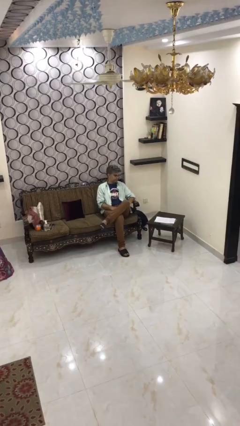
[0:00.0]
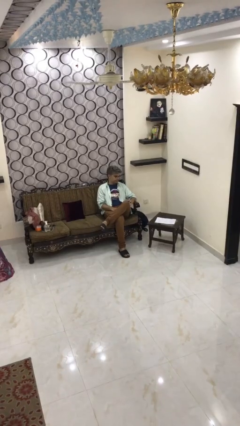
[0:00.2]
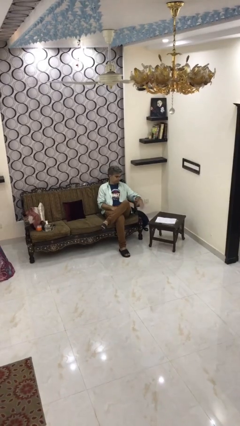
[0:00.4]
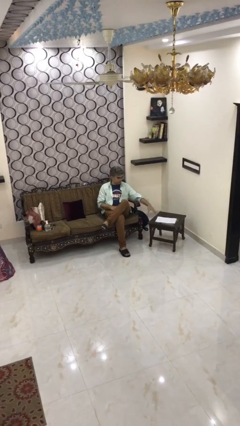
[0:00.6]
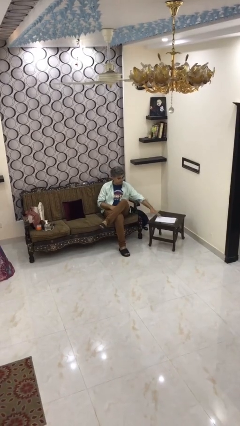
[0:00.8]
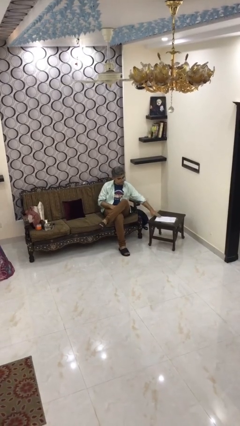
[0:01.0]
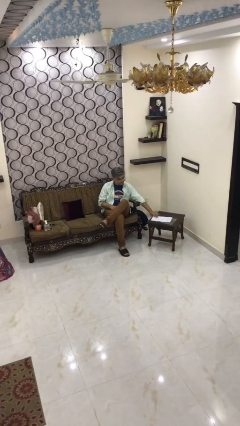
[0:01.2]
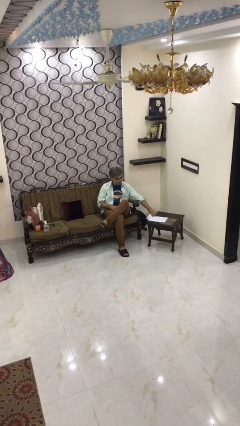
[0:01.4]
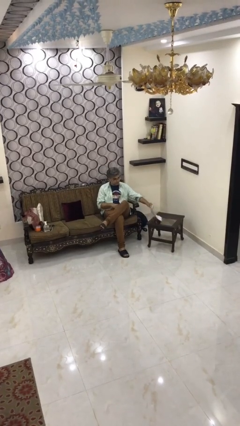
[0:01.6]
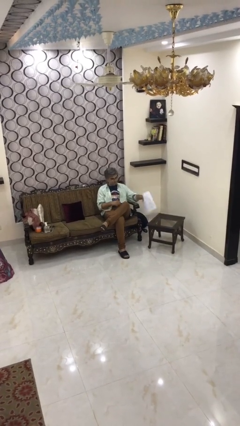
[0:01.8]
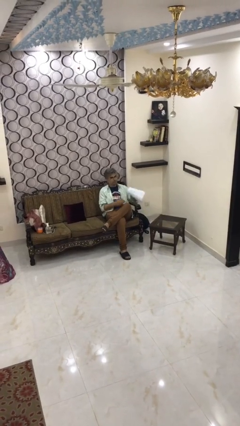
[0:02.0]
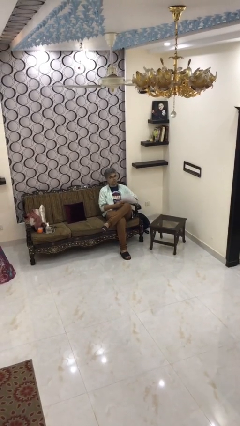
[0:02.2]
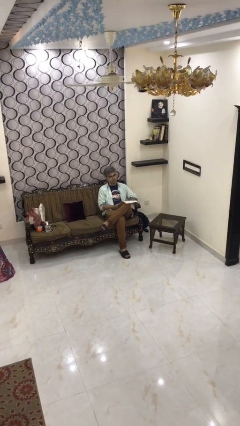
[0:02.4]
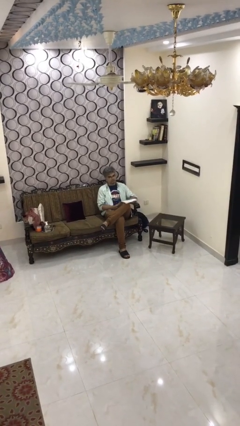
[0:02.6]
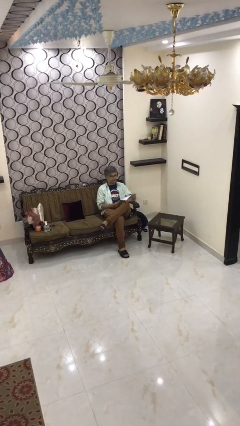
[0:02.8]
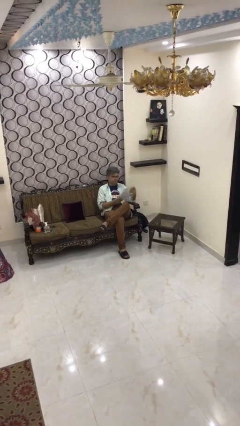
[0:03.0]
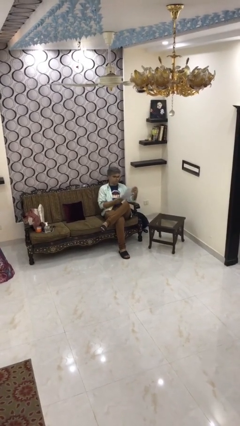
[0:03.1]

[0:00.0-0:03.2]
person picks up object from table

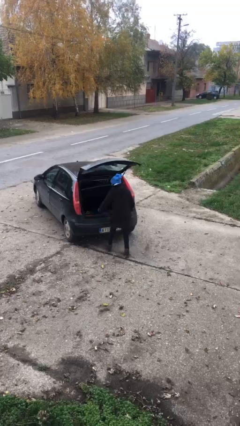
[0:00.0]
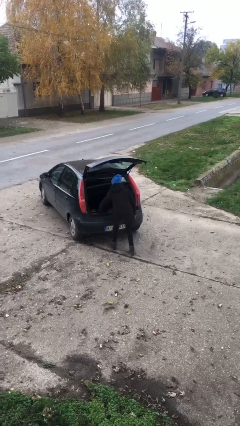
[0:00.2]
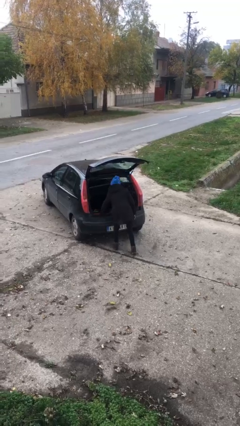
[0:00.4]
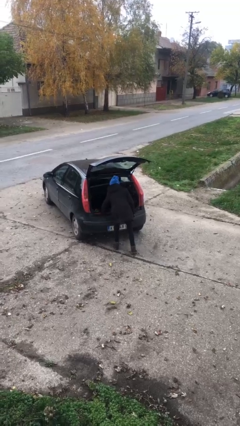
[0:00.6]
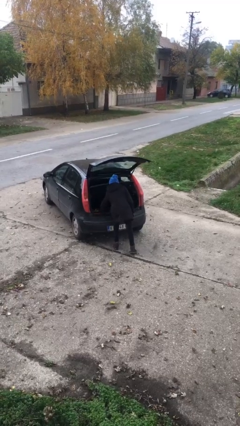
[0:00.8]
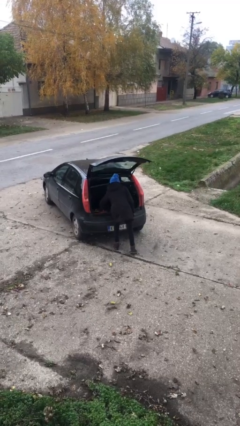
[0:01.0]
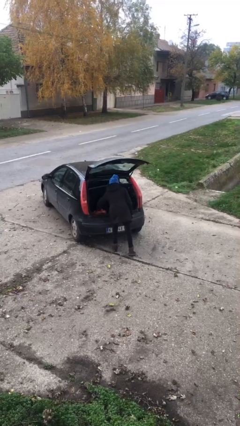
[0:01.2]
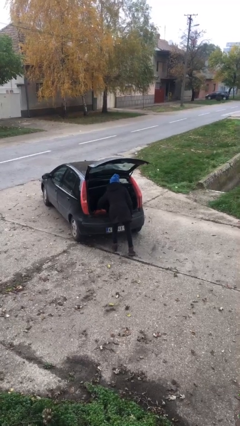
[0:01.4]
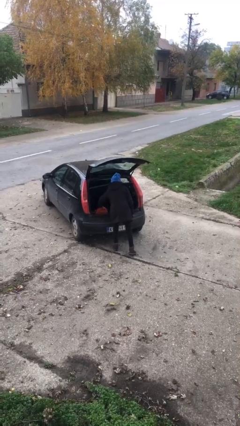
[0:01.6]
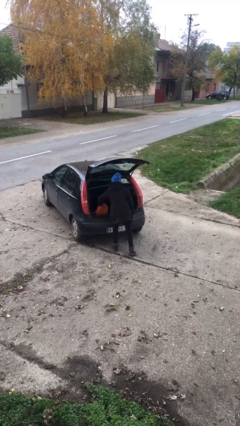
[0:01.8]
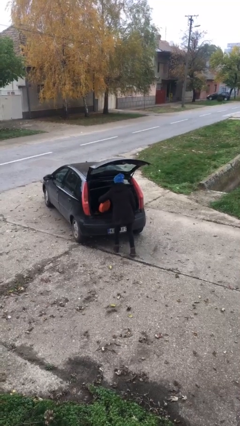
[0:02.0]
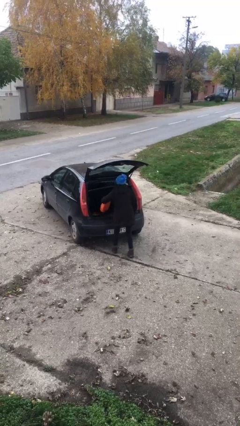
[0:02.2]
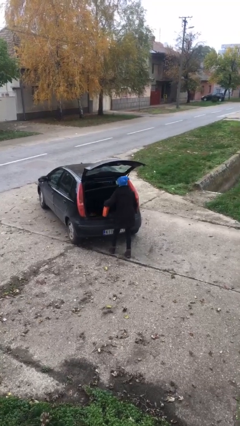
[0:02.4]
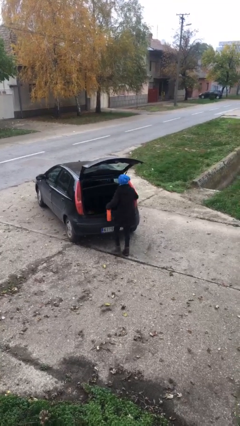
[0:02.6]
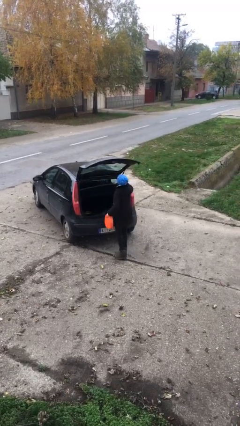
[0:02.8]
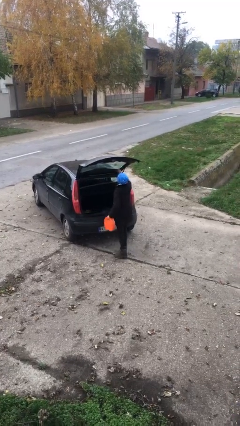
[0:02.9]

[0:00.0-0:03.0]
person unloads car

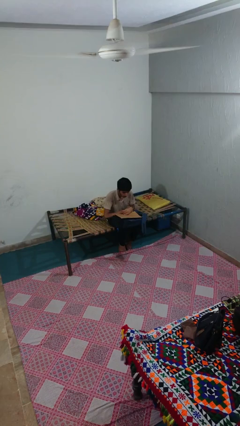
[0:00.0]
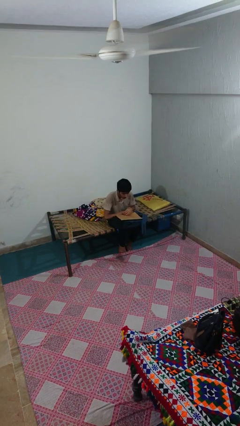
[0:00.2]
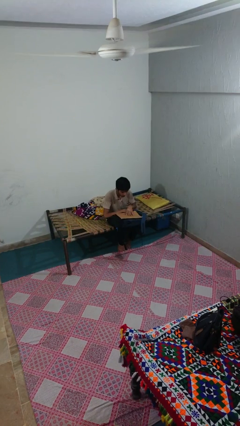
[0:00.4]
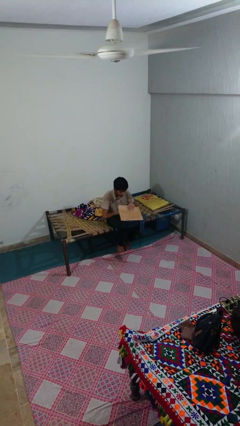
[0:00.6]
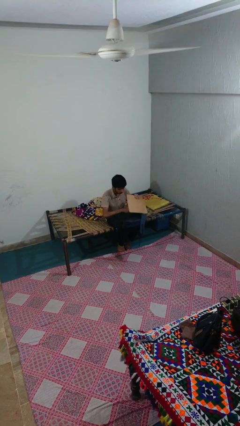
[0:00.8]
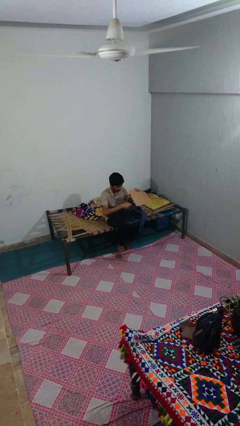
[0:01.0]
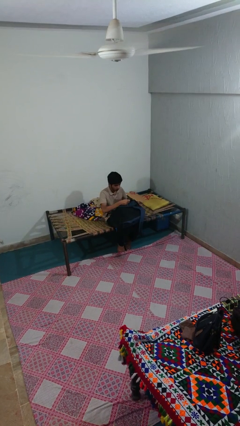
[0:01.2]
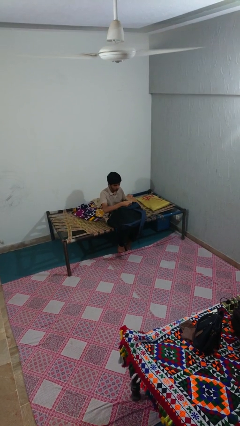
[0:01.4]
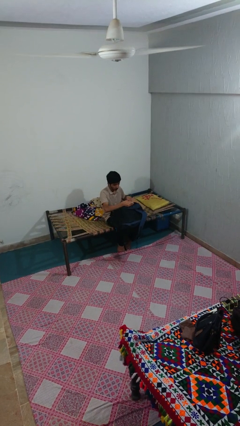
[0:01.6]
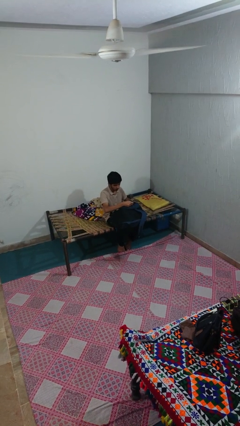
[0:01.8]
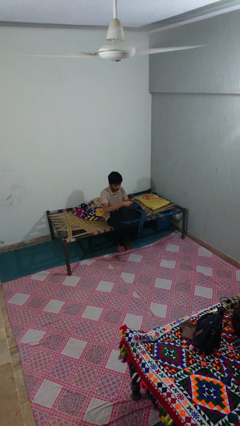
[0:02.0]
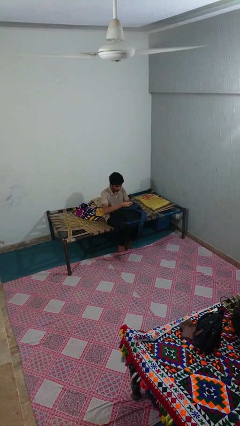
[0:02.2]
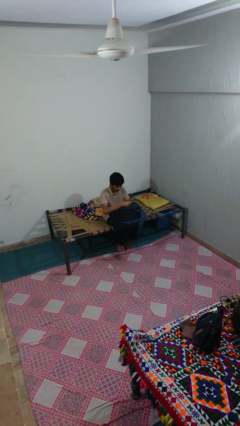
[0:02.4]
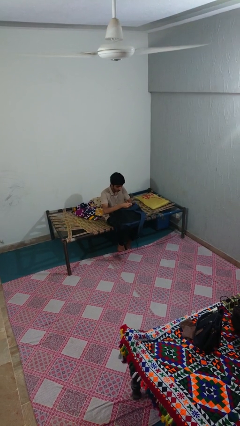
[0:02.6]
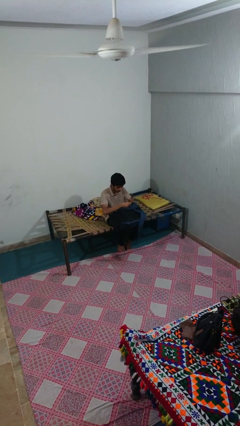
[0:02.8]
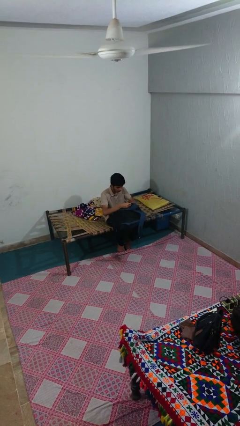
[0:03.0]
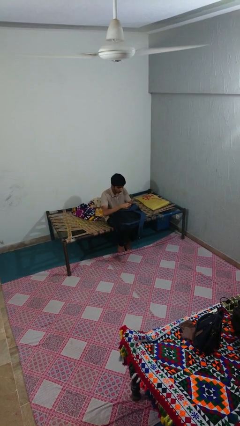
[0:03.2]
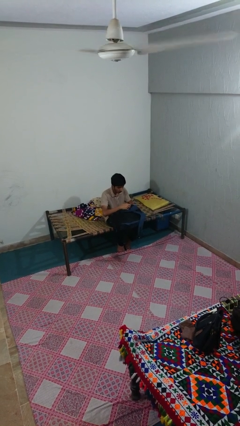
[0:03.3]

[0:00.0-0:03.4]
person puts object into backpack

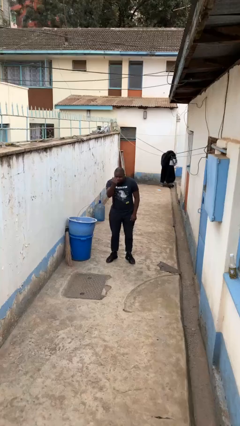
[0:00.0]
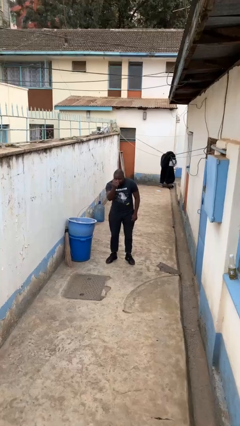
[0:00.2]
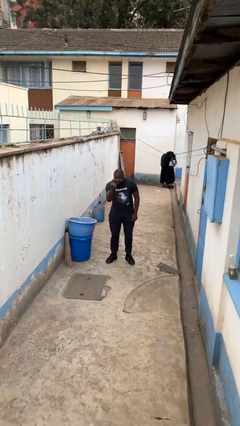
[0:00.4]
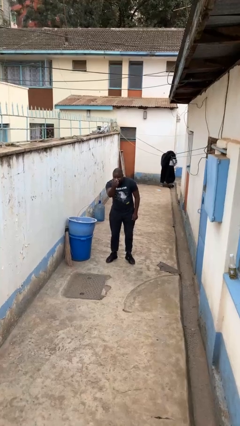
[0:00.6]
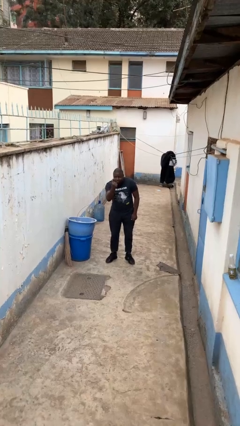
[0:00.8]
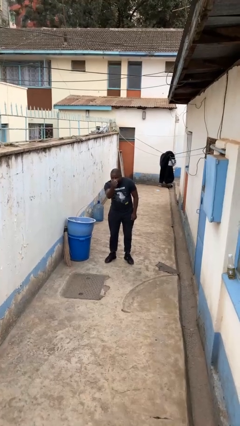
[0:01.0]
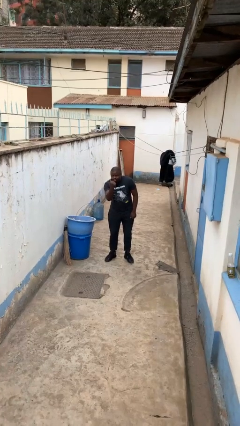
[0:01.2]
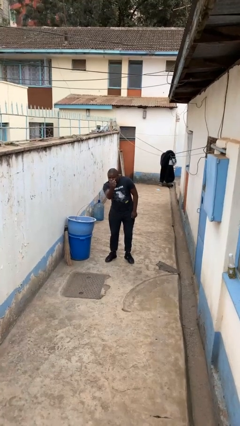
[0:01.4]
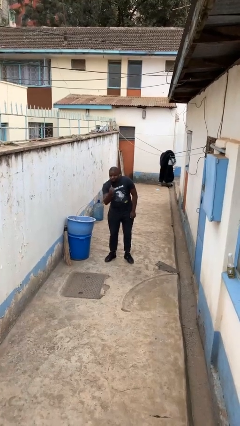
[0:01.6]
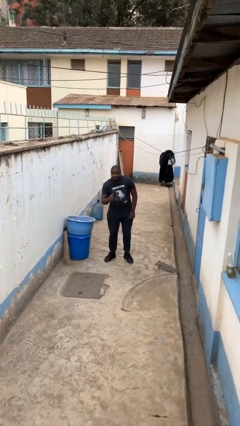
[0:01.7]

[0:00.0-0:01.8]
person gestures come here

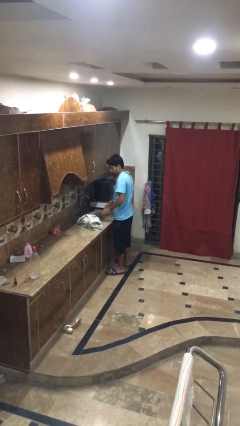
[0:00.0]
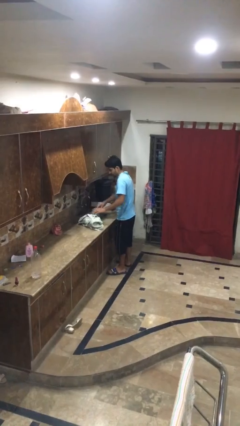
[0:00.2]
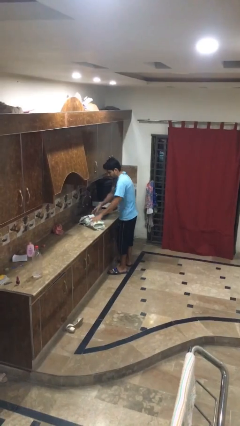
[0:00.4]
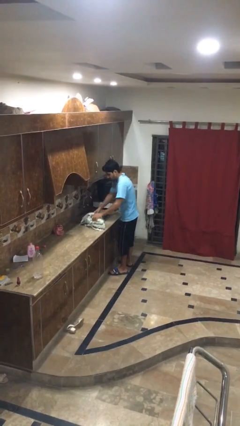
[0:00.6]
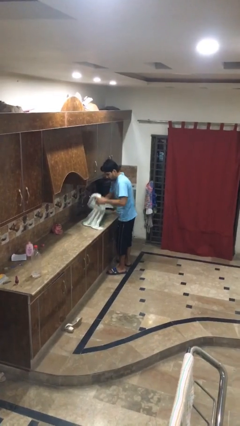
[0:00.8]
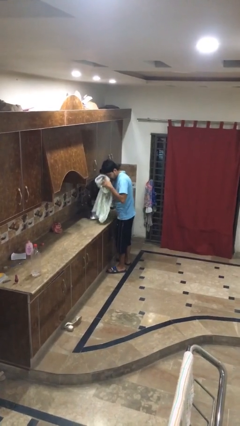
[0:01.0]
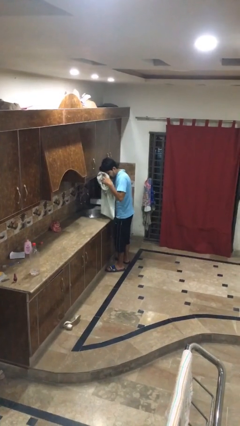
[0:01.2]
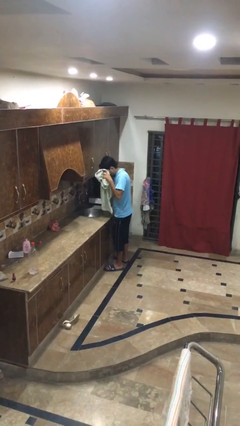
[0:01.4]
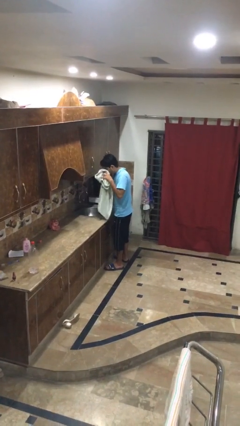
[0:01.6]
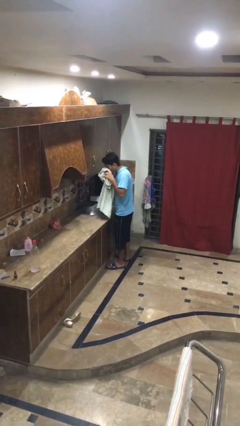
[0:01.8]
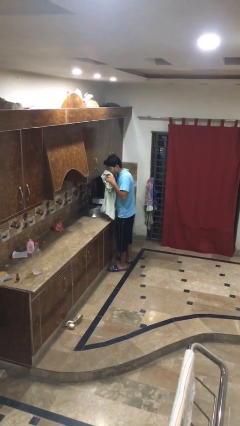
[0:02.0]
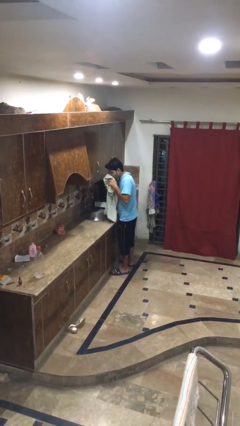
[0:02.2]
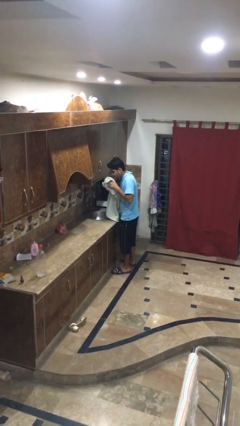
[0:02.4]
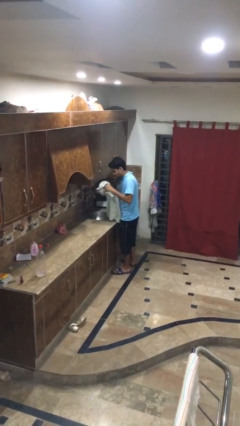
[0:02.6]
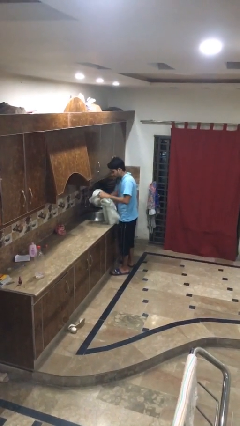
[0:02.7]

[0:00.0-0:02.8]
person dries face with towel

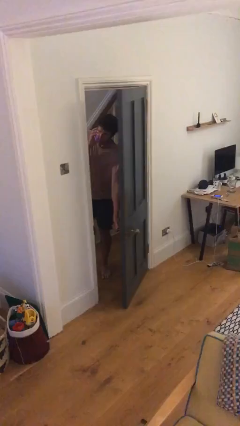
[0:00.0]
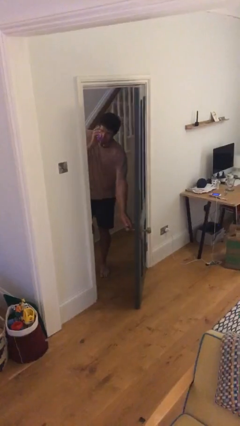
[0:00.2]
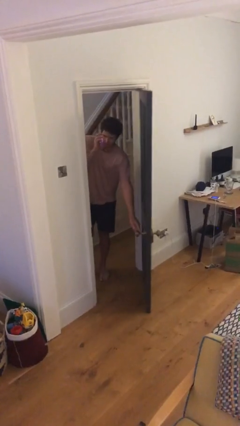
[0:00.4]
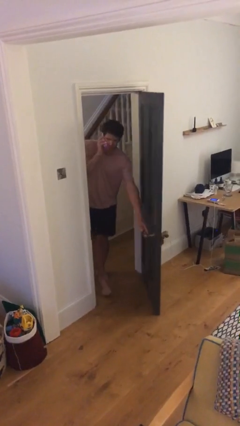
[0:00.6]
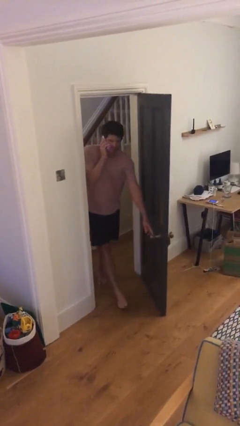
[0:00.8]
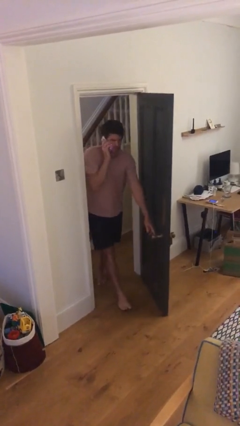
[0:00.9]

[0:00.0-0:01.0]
person opens facility door

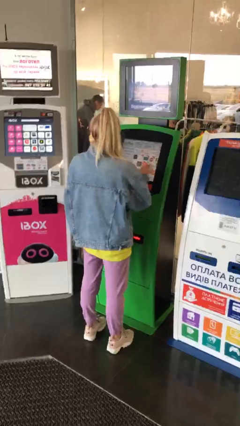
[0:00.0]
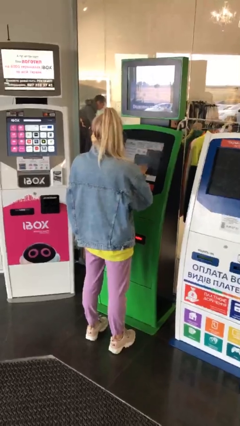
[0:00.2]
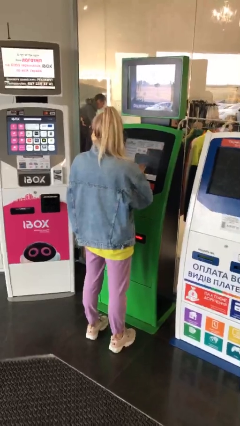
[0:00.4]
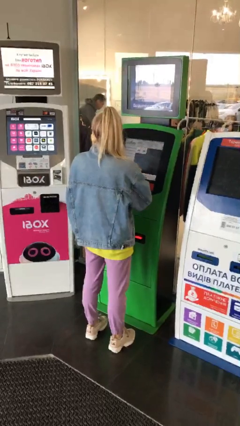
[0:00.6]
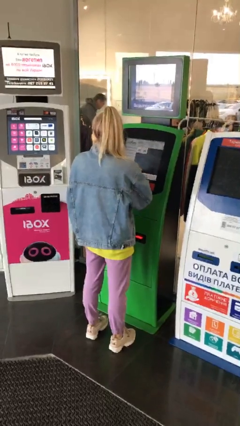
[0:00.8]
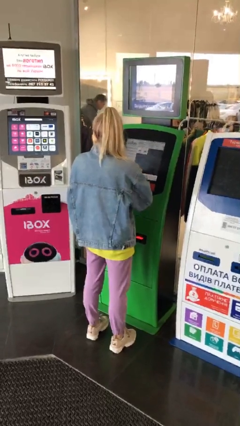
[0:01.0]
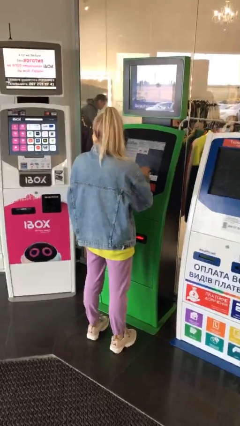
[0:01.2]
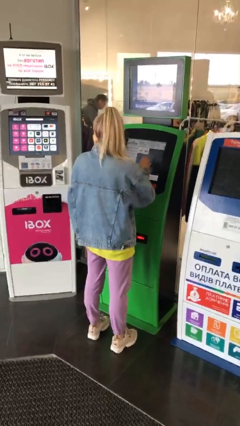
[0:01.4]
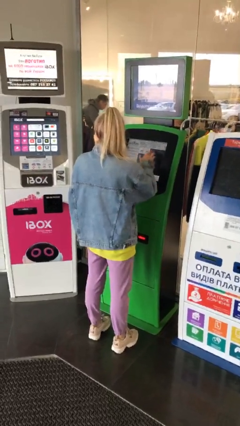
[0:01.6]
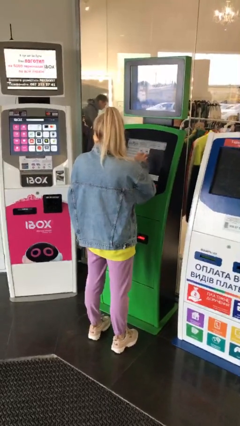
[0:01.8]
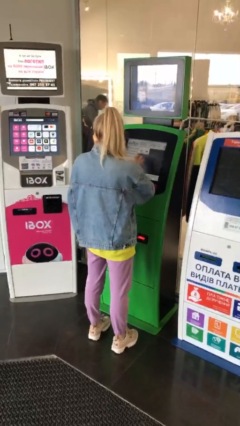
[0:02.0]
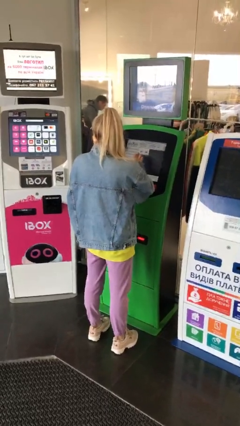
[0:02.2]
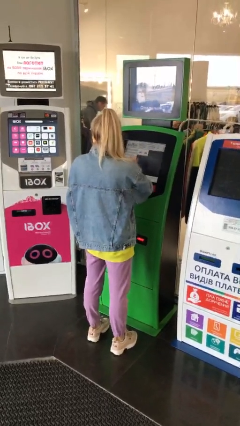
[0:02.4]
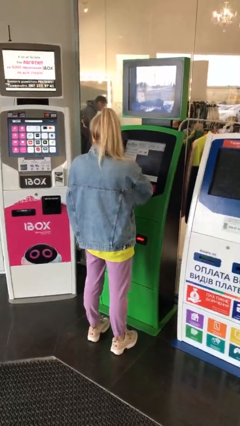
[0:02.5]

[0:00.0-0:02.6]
person purchases from machine
